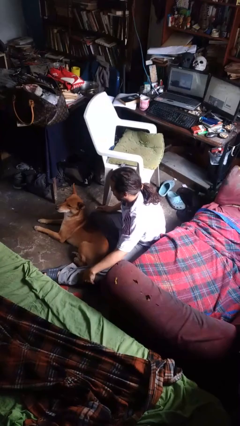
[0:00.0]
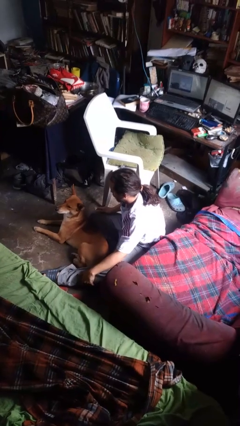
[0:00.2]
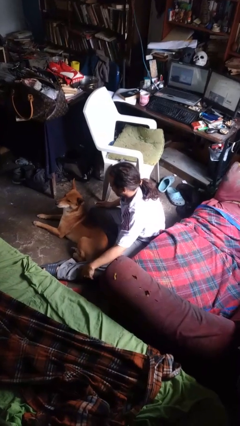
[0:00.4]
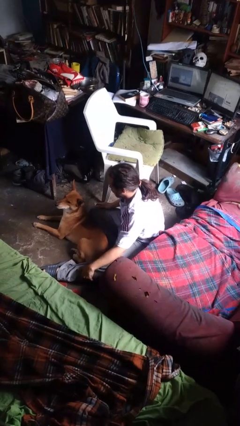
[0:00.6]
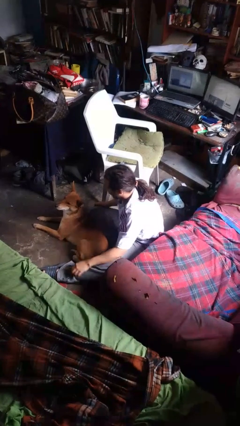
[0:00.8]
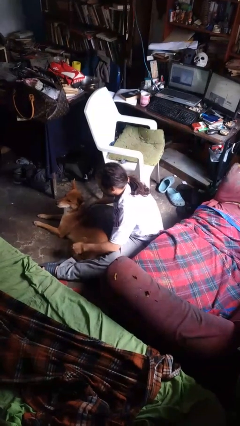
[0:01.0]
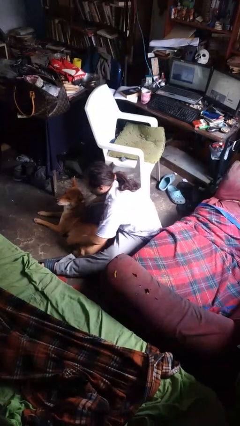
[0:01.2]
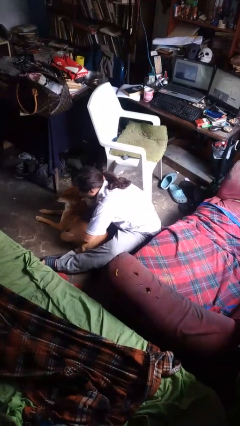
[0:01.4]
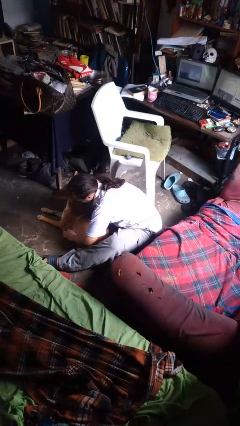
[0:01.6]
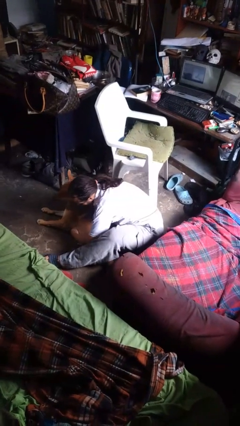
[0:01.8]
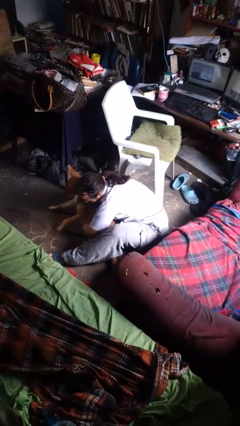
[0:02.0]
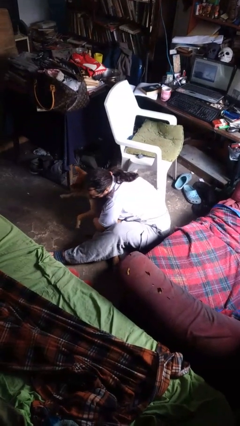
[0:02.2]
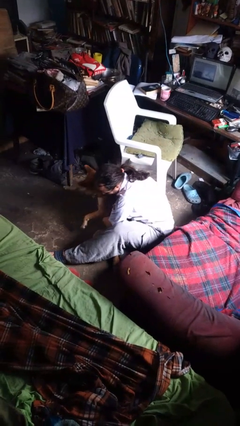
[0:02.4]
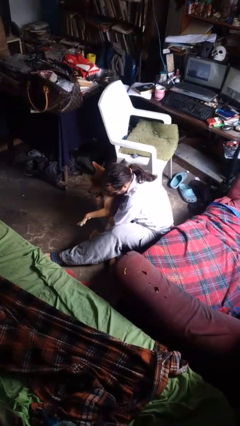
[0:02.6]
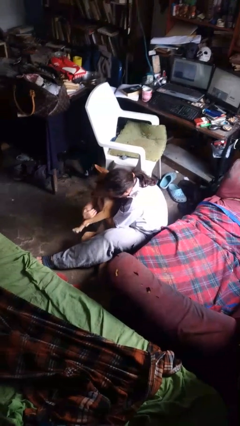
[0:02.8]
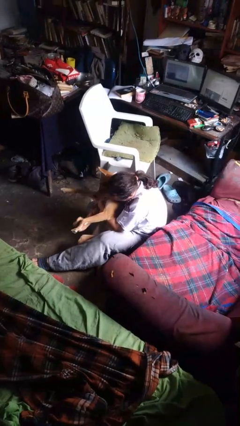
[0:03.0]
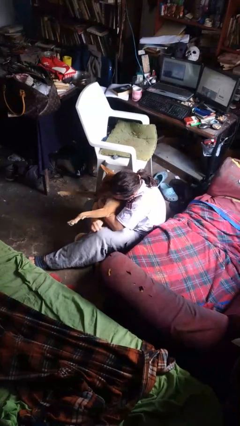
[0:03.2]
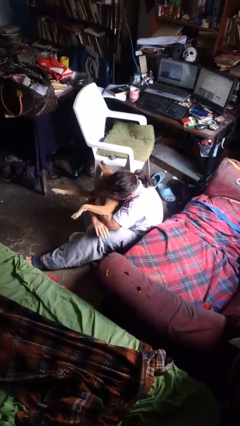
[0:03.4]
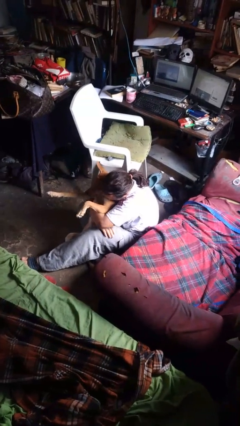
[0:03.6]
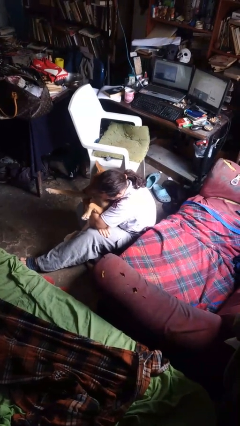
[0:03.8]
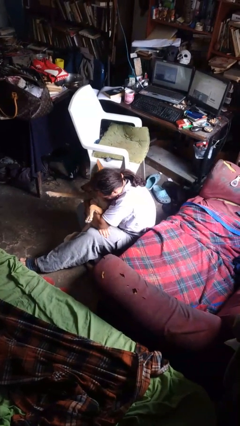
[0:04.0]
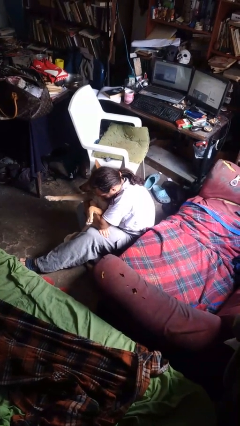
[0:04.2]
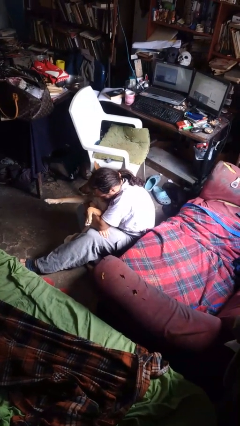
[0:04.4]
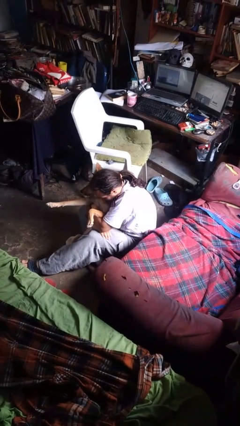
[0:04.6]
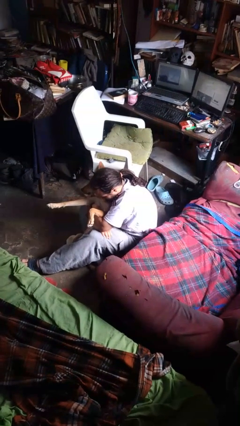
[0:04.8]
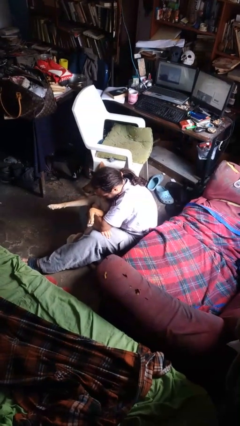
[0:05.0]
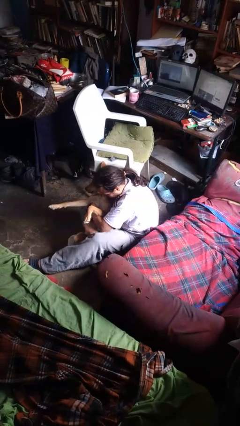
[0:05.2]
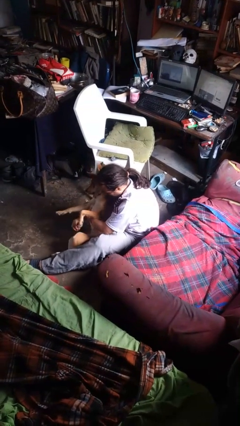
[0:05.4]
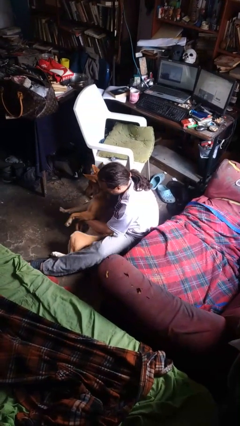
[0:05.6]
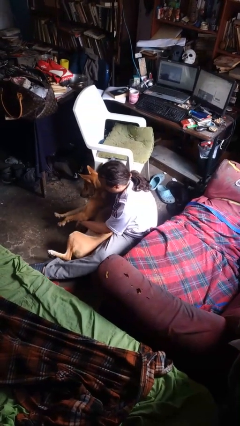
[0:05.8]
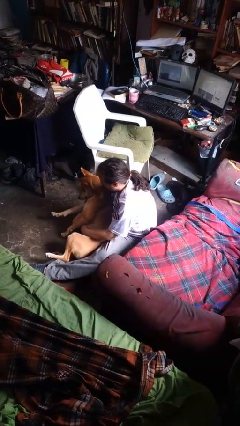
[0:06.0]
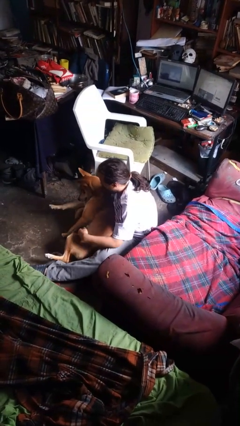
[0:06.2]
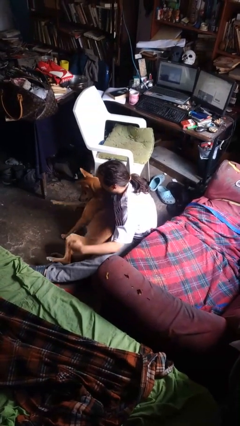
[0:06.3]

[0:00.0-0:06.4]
person hugs dog

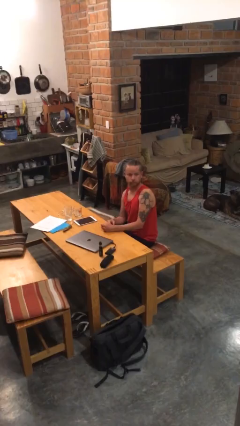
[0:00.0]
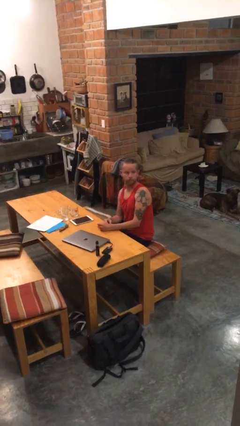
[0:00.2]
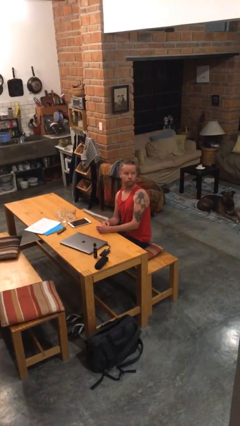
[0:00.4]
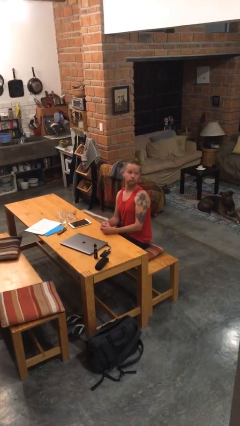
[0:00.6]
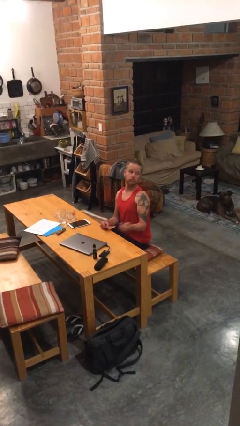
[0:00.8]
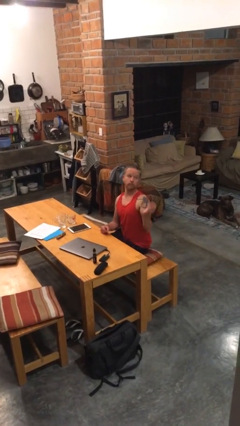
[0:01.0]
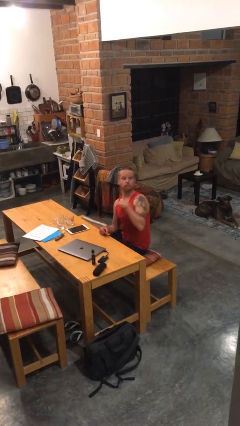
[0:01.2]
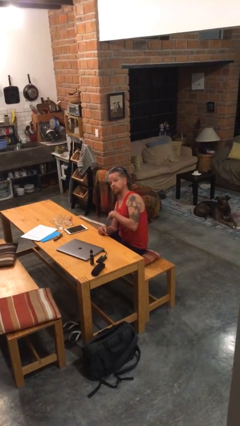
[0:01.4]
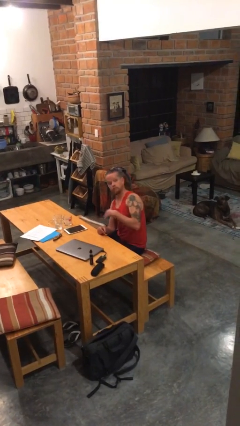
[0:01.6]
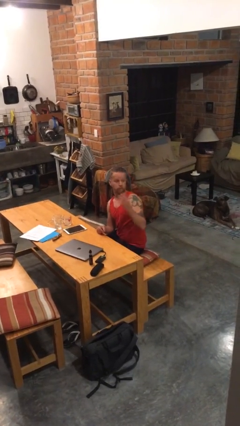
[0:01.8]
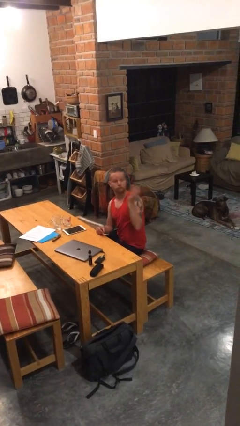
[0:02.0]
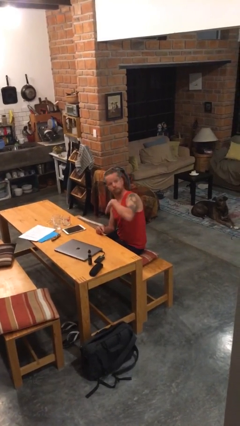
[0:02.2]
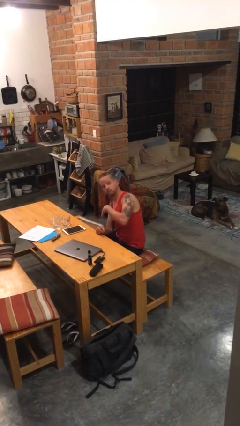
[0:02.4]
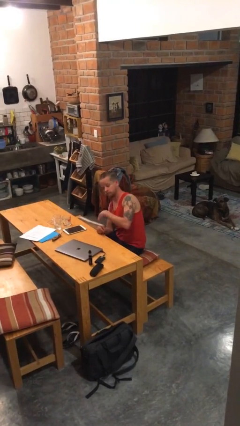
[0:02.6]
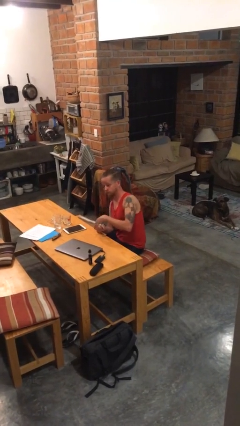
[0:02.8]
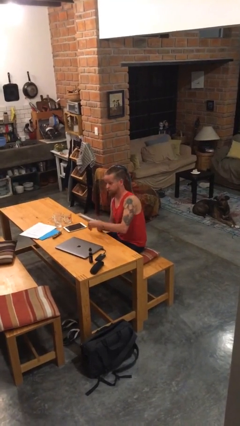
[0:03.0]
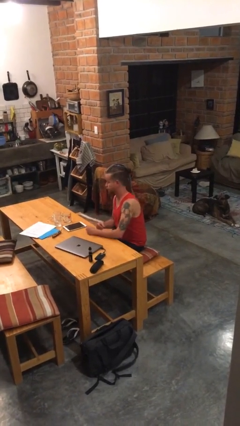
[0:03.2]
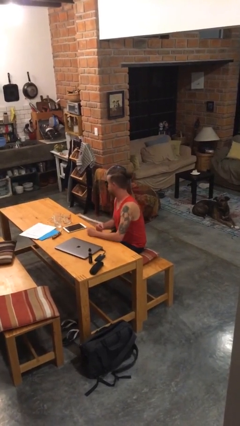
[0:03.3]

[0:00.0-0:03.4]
person gestures come here

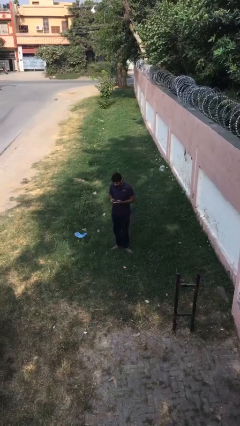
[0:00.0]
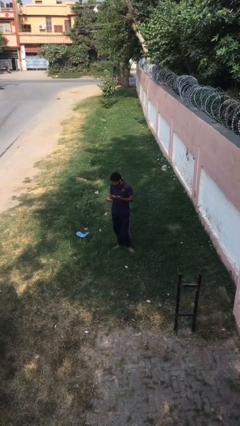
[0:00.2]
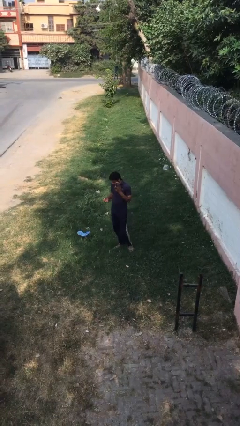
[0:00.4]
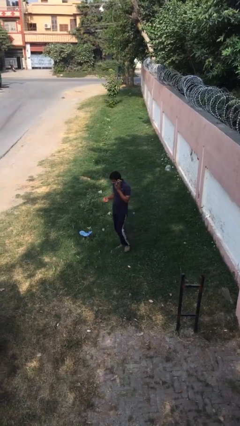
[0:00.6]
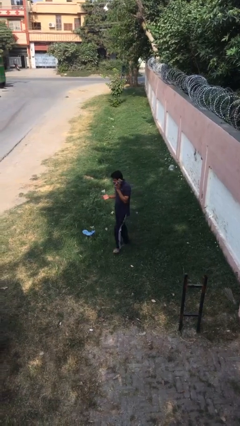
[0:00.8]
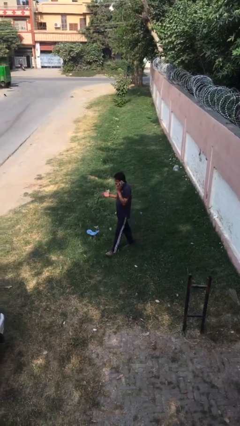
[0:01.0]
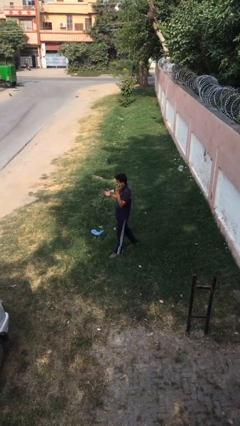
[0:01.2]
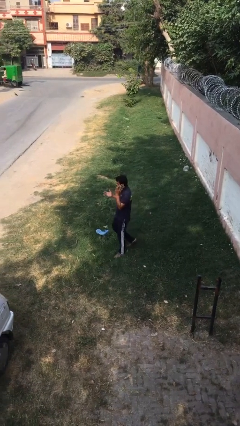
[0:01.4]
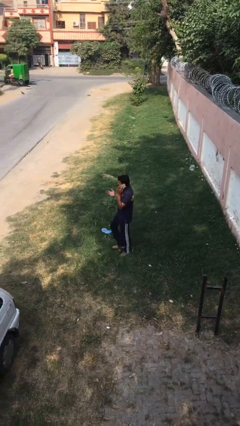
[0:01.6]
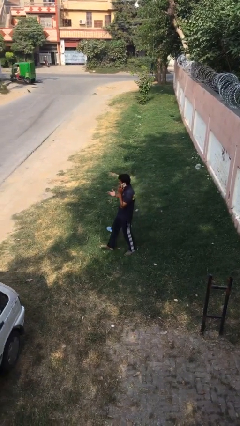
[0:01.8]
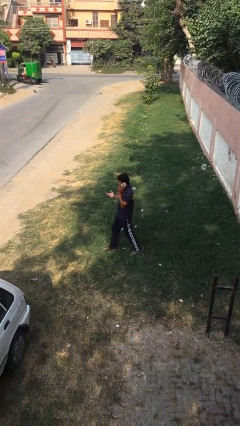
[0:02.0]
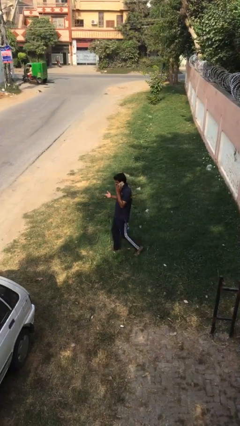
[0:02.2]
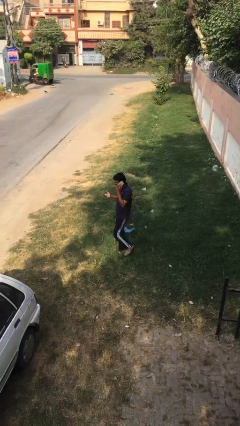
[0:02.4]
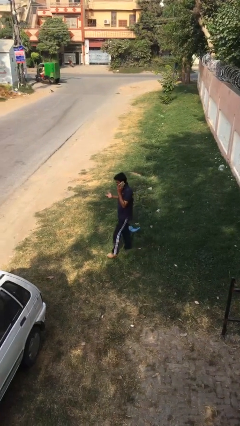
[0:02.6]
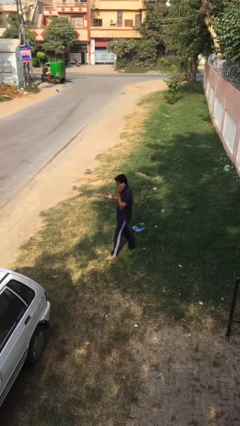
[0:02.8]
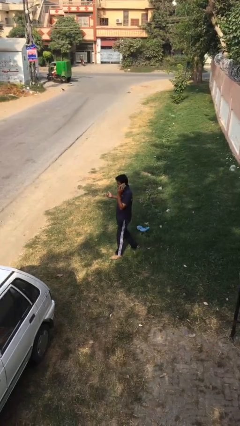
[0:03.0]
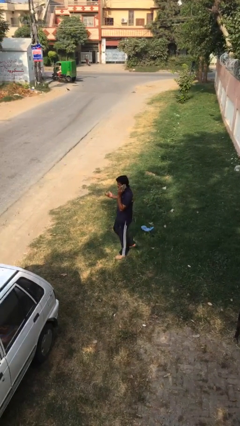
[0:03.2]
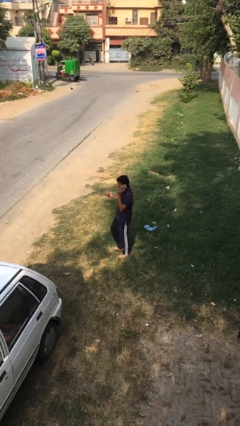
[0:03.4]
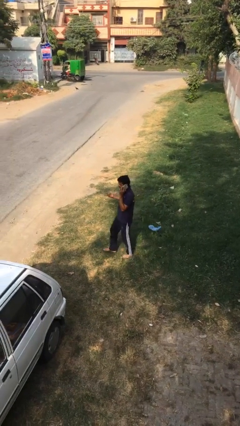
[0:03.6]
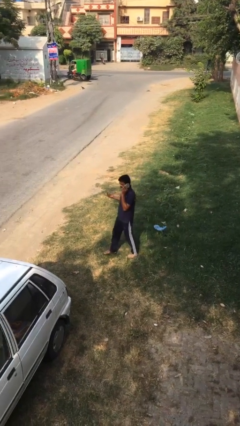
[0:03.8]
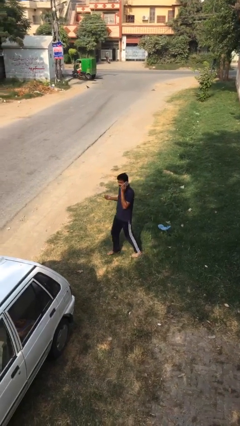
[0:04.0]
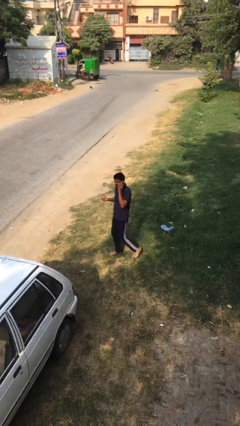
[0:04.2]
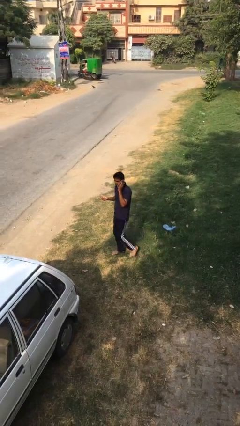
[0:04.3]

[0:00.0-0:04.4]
person talks on phone

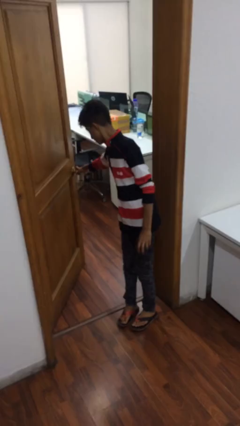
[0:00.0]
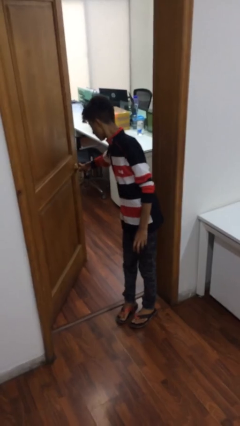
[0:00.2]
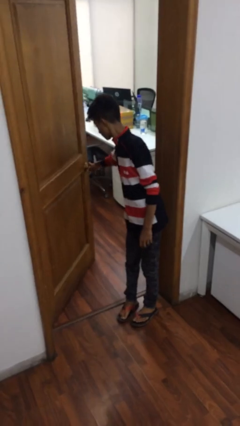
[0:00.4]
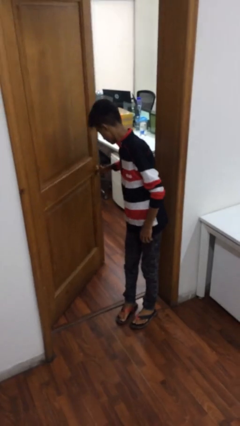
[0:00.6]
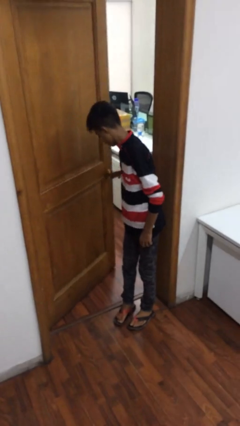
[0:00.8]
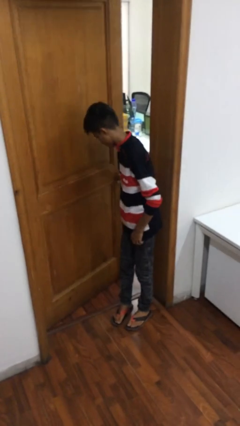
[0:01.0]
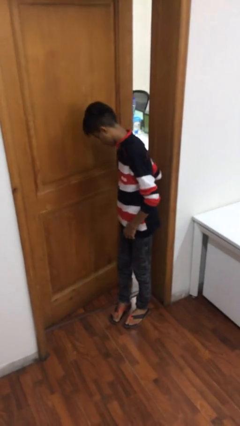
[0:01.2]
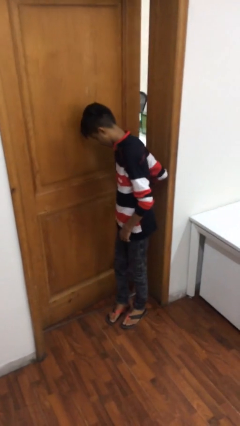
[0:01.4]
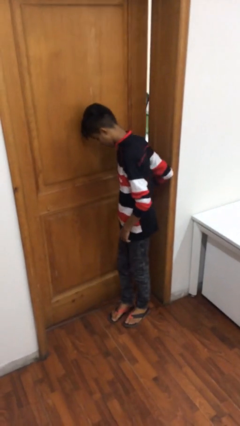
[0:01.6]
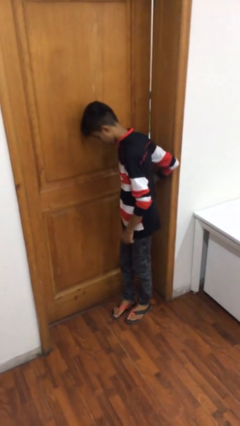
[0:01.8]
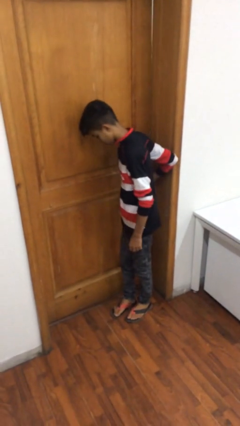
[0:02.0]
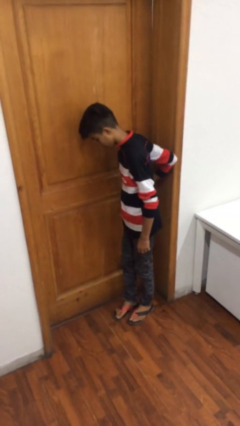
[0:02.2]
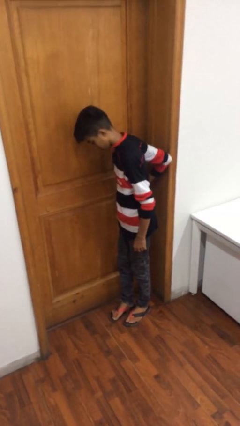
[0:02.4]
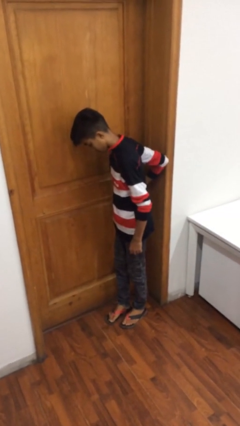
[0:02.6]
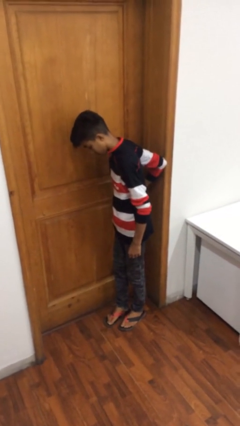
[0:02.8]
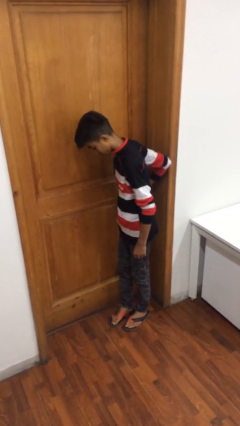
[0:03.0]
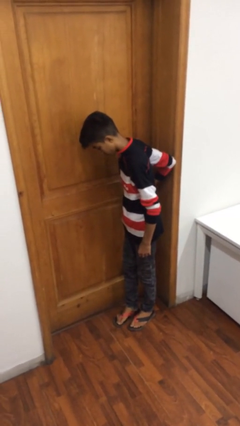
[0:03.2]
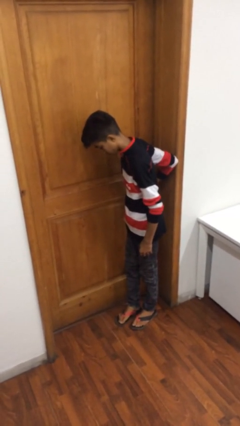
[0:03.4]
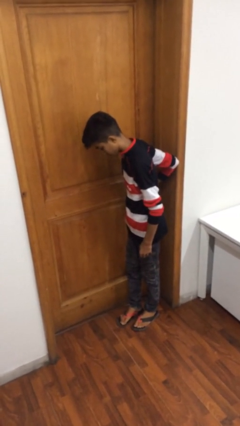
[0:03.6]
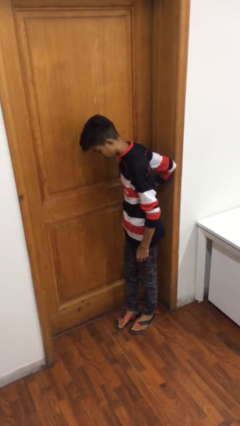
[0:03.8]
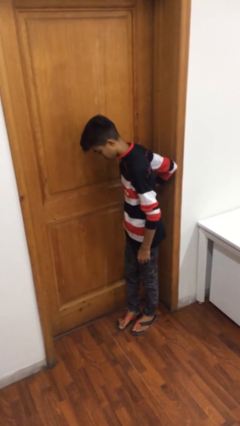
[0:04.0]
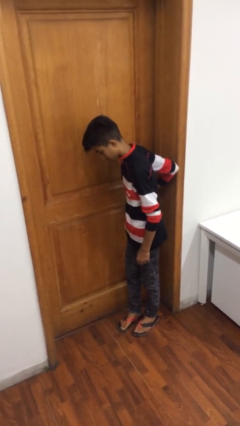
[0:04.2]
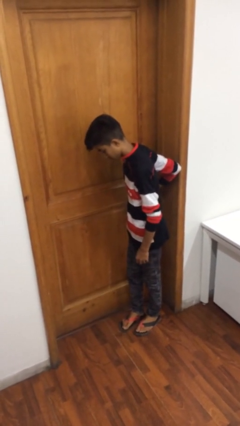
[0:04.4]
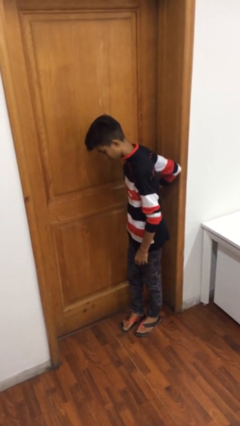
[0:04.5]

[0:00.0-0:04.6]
person closes facility door
